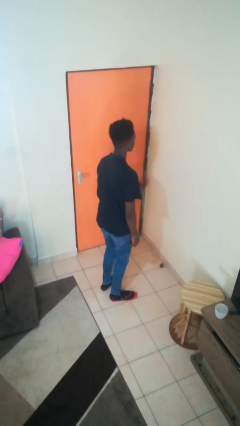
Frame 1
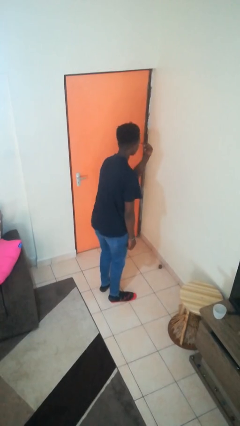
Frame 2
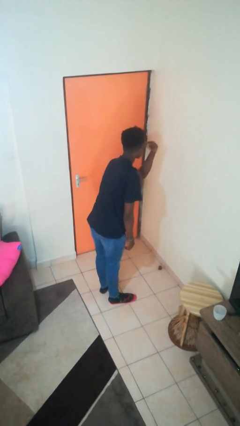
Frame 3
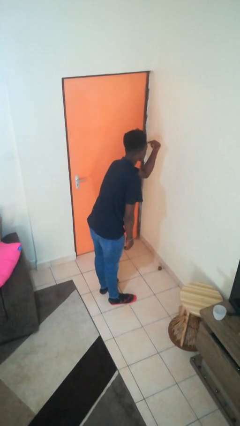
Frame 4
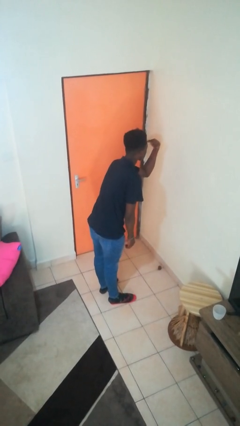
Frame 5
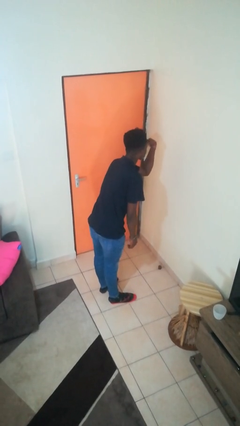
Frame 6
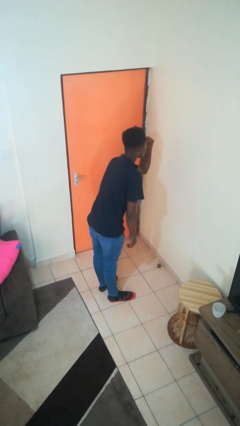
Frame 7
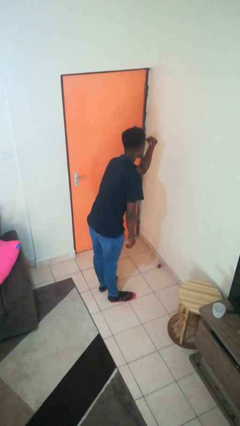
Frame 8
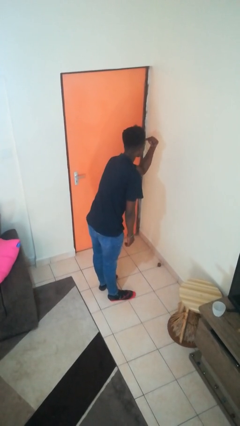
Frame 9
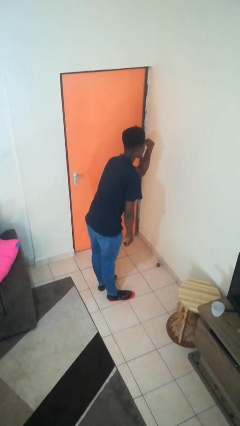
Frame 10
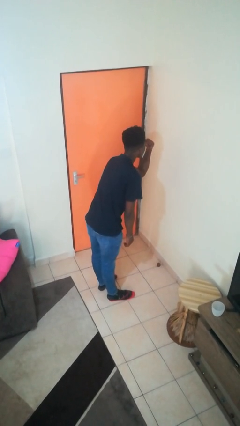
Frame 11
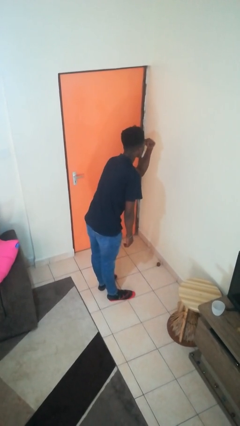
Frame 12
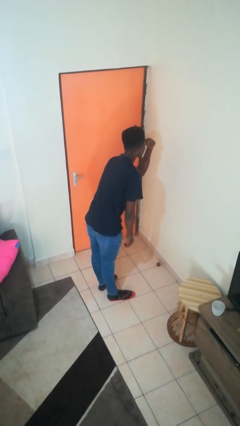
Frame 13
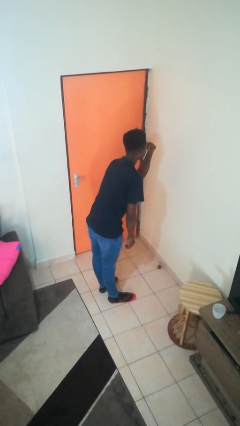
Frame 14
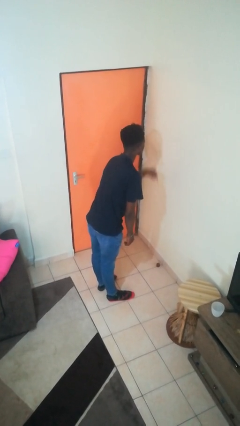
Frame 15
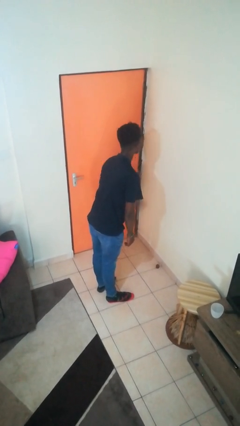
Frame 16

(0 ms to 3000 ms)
person gestures watch closely

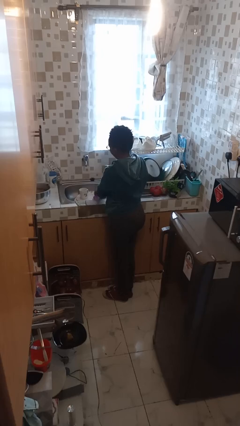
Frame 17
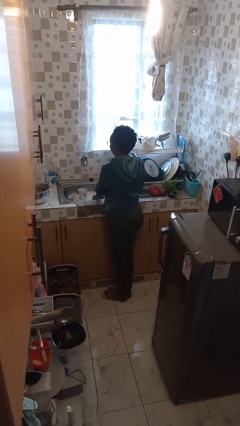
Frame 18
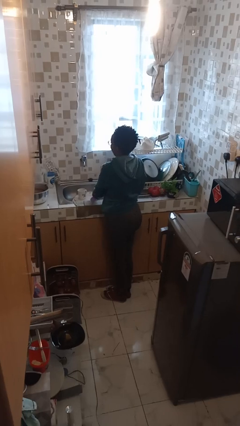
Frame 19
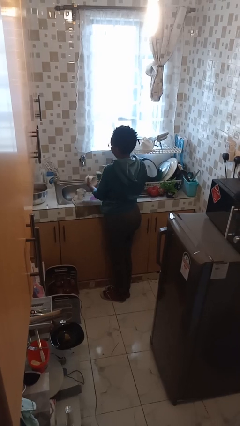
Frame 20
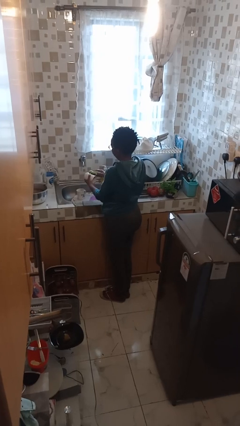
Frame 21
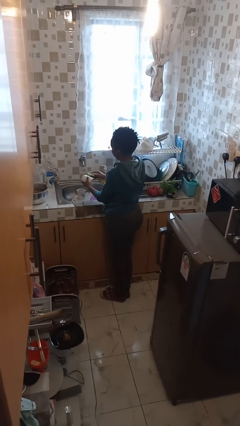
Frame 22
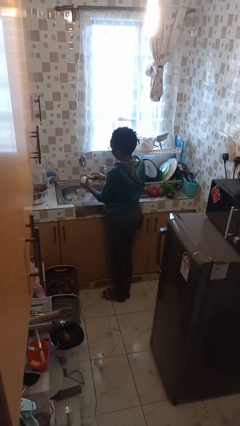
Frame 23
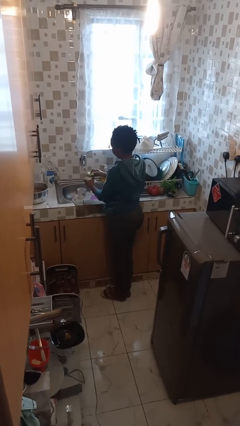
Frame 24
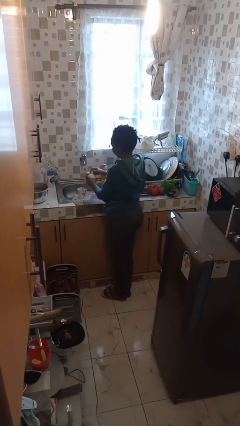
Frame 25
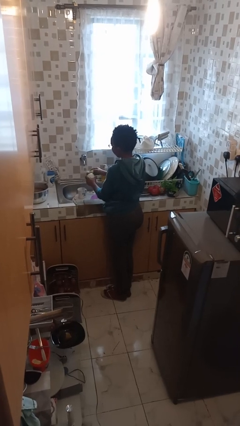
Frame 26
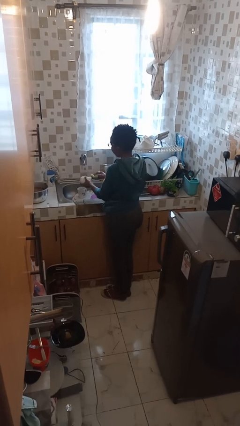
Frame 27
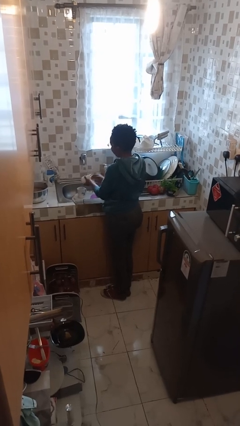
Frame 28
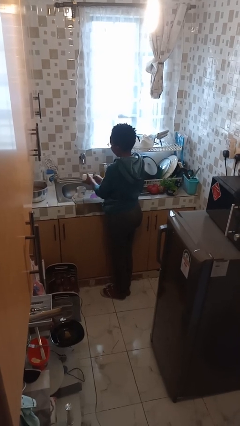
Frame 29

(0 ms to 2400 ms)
person washes dish

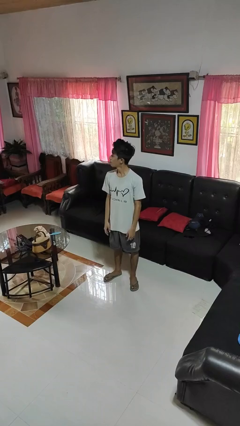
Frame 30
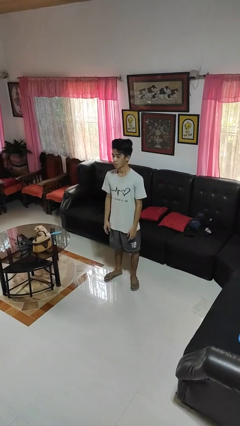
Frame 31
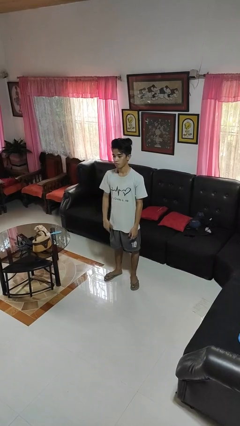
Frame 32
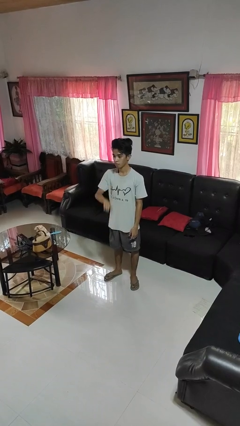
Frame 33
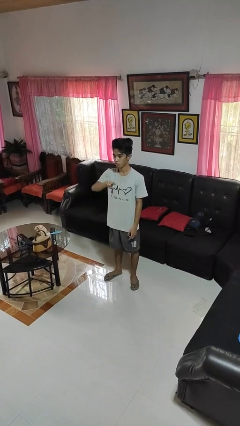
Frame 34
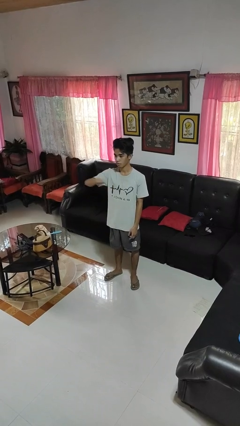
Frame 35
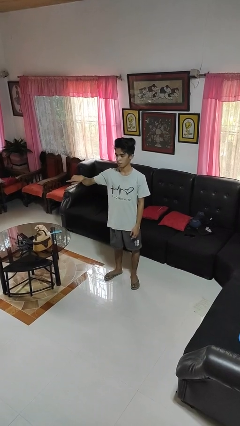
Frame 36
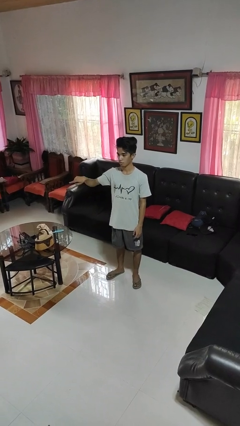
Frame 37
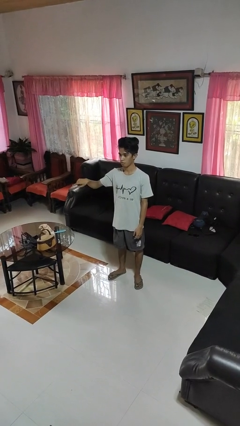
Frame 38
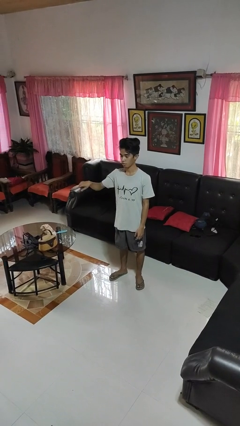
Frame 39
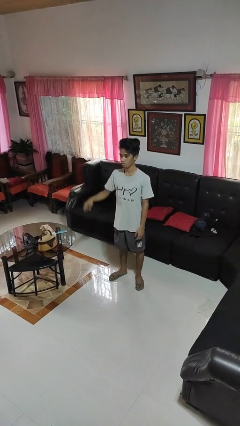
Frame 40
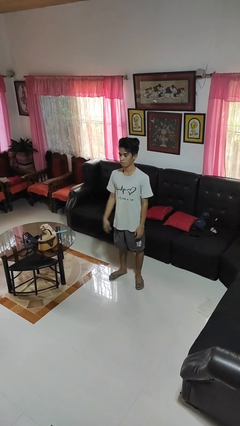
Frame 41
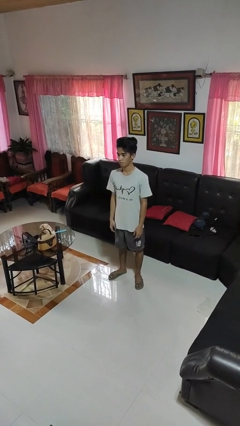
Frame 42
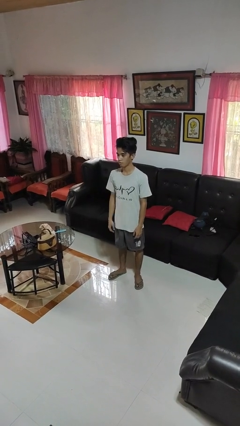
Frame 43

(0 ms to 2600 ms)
person gestures swipe right

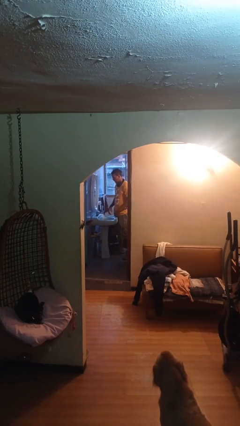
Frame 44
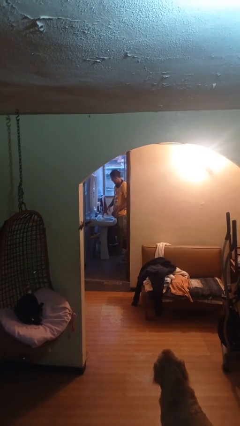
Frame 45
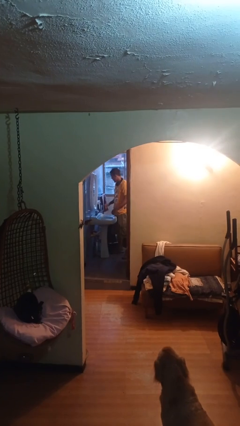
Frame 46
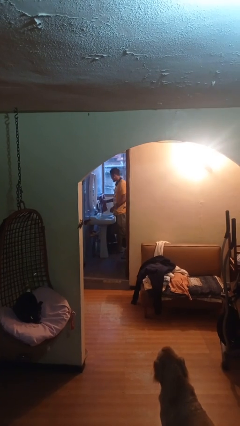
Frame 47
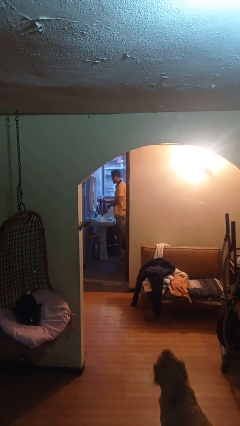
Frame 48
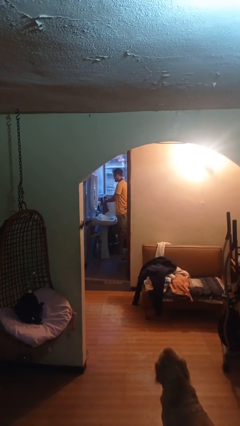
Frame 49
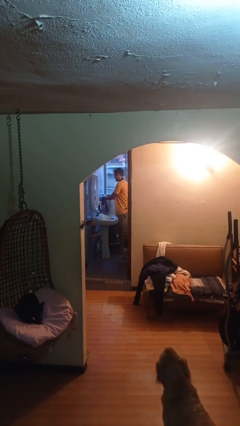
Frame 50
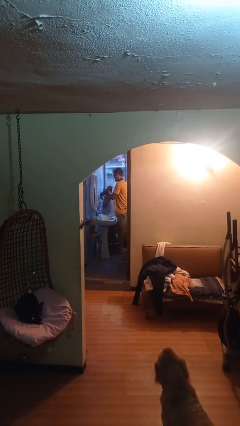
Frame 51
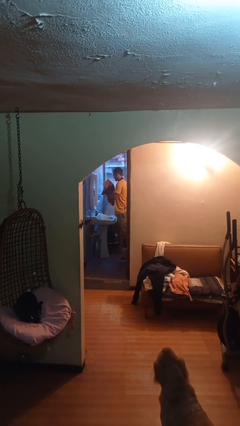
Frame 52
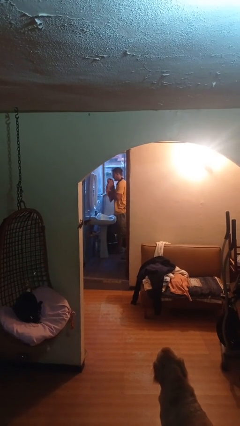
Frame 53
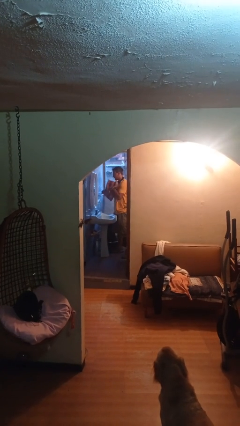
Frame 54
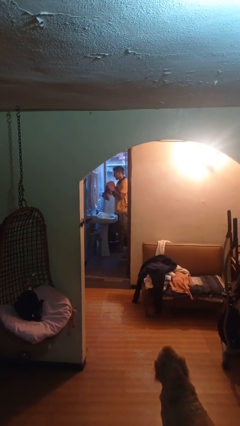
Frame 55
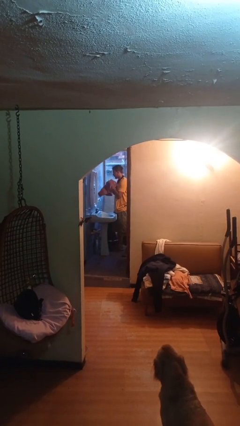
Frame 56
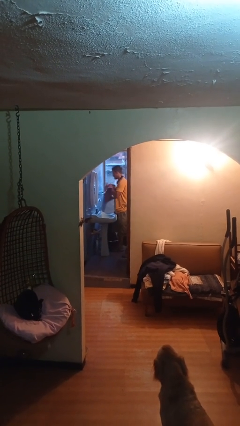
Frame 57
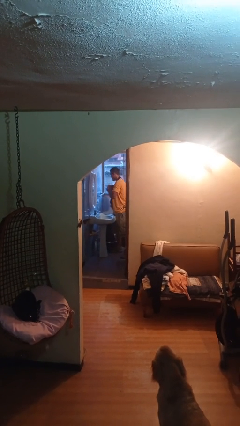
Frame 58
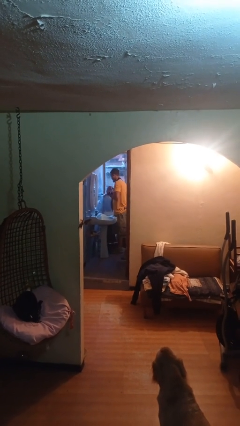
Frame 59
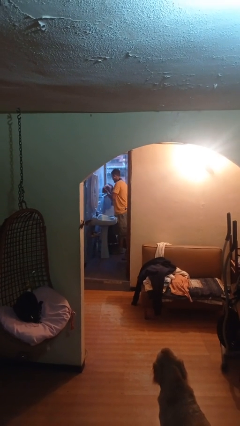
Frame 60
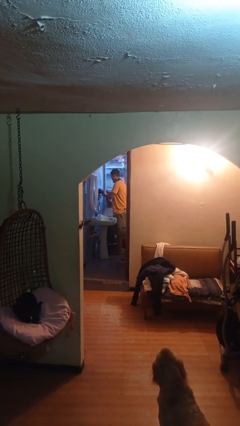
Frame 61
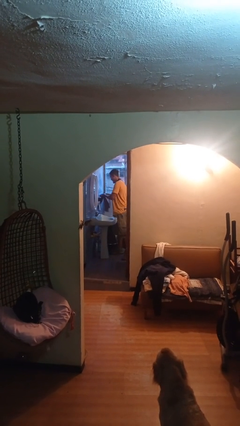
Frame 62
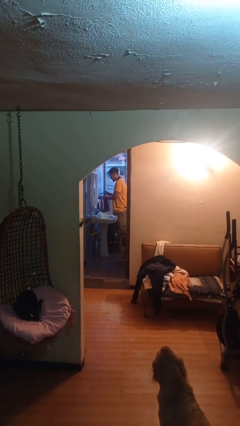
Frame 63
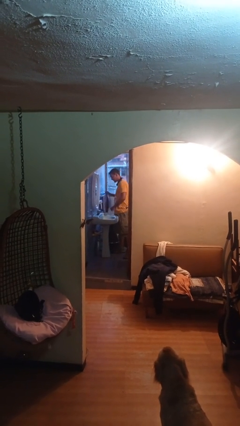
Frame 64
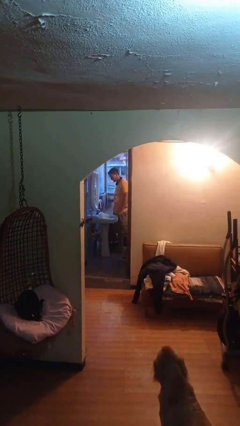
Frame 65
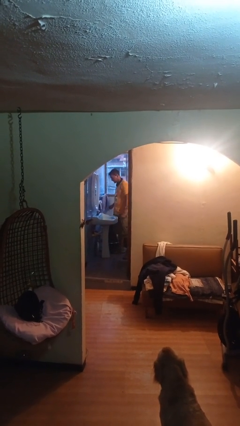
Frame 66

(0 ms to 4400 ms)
person dries hands with towel

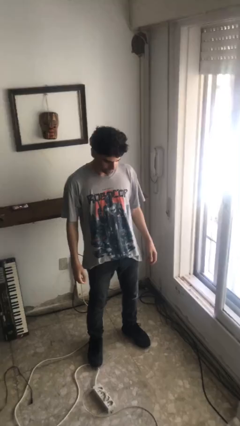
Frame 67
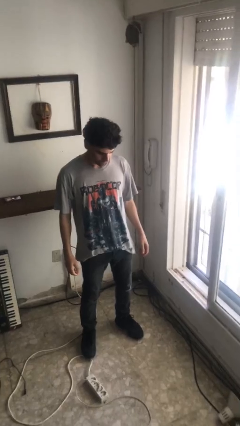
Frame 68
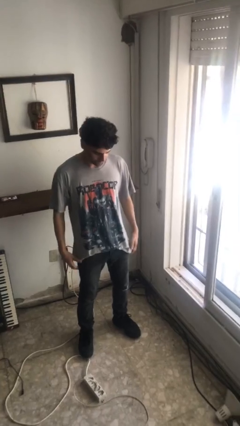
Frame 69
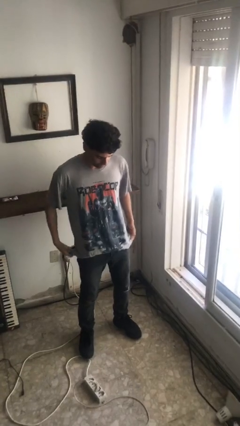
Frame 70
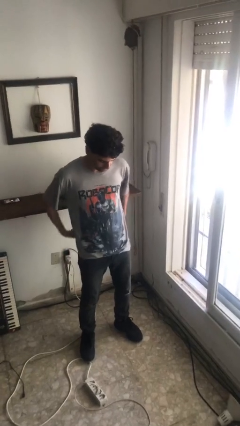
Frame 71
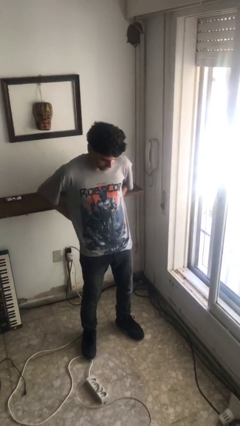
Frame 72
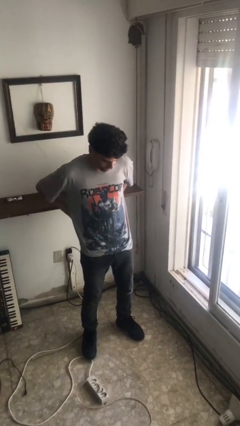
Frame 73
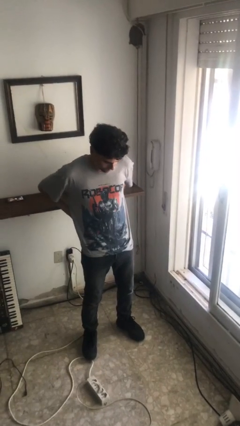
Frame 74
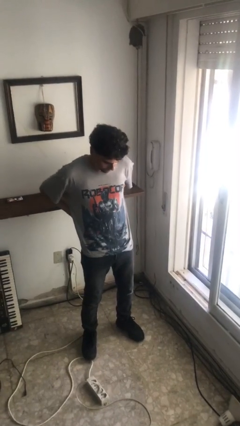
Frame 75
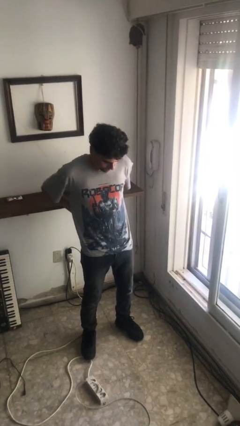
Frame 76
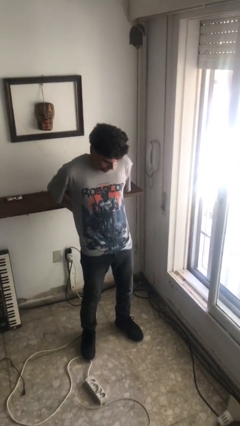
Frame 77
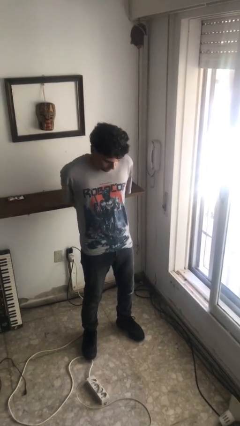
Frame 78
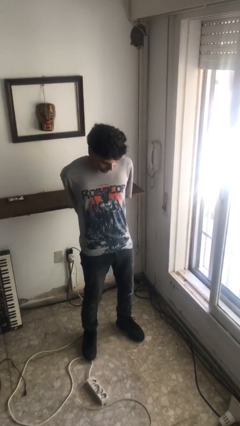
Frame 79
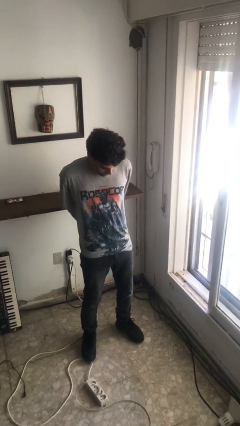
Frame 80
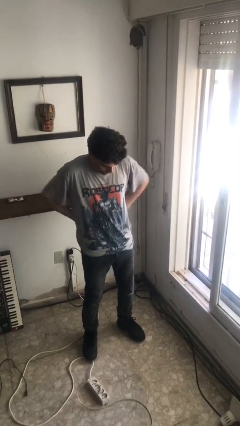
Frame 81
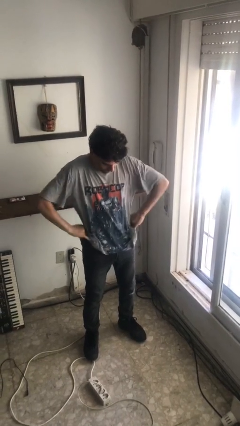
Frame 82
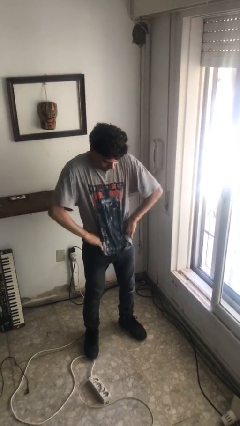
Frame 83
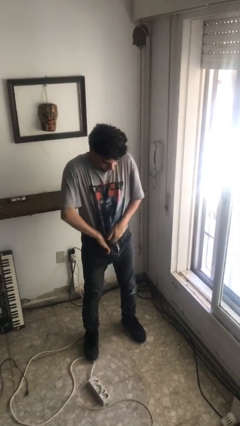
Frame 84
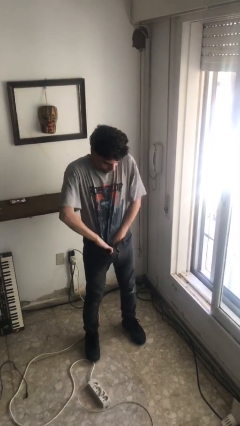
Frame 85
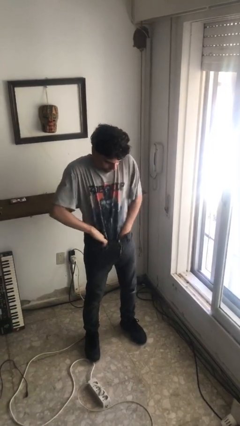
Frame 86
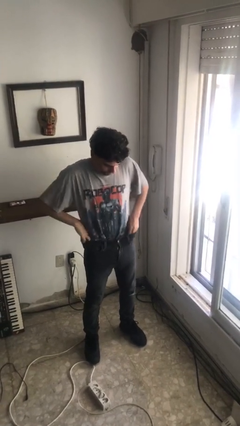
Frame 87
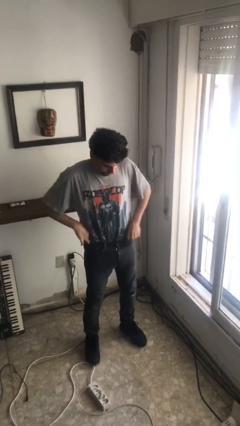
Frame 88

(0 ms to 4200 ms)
person tucks in shirt

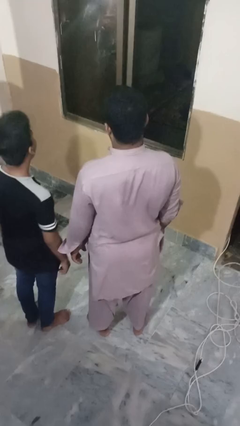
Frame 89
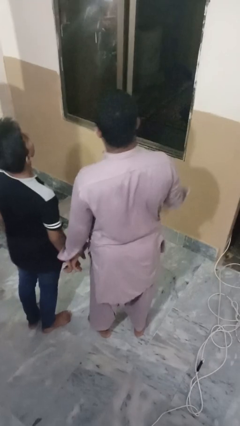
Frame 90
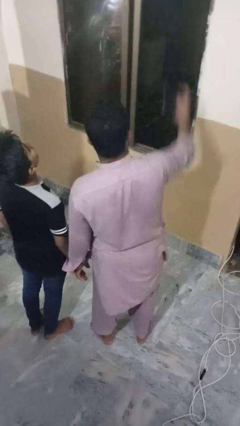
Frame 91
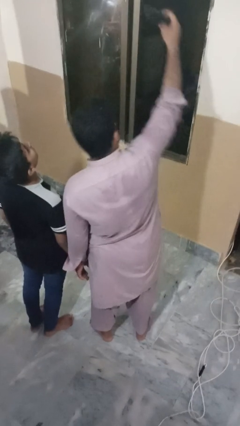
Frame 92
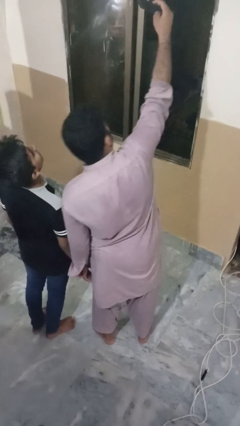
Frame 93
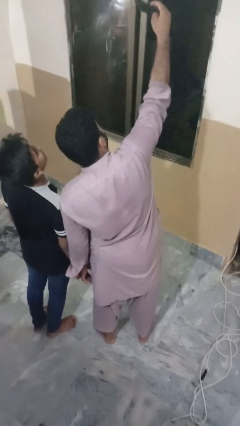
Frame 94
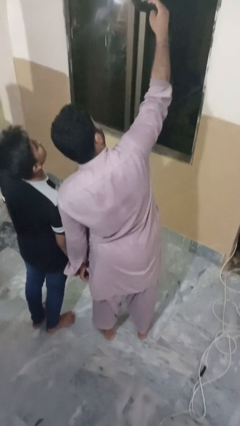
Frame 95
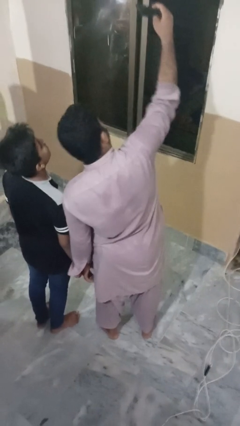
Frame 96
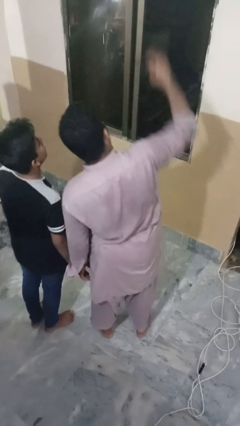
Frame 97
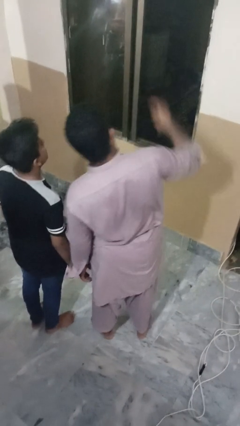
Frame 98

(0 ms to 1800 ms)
person takes selfie with person
